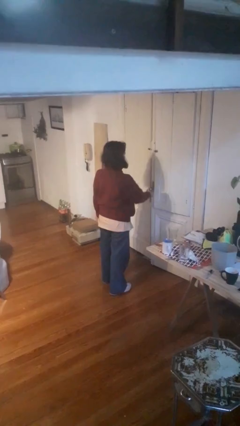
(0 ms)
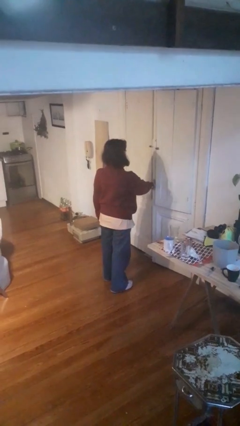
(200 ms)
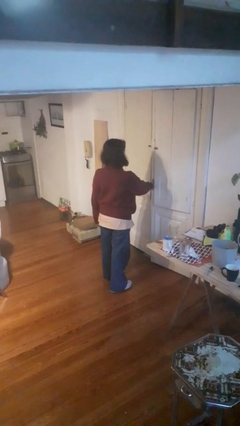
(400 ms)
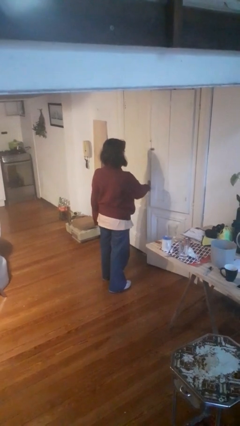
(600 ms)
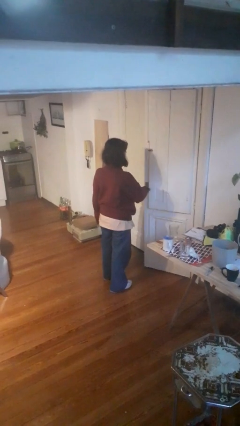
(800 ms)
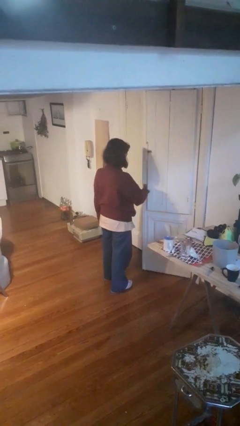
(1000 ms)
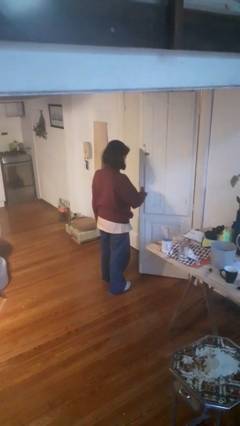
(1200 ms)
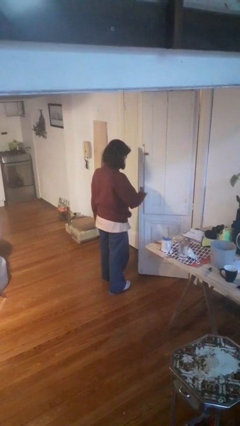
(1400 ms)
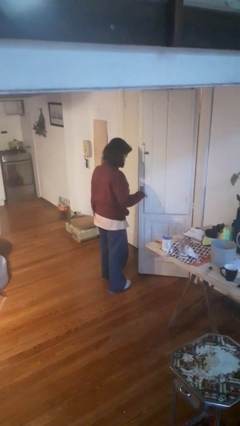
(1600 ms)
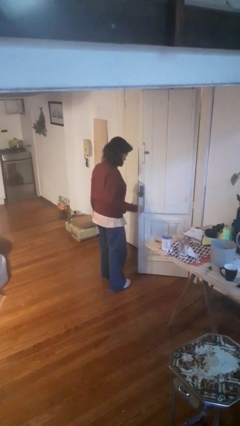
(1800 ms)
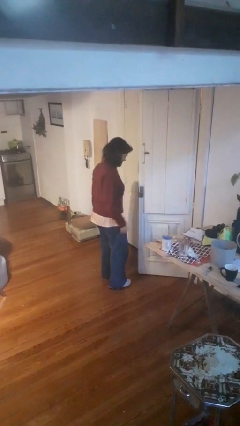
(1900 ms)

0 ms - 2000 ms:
person opens facility door

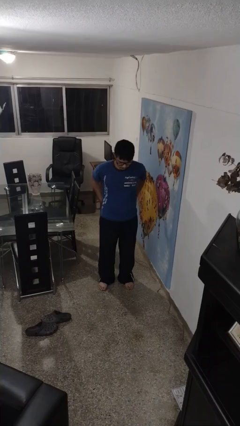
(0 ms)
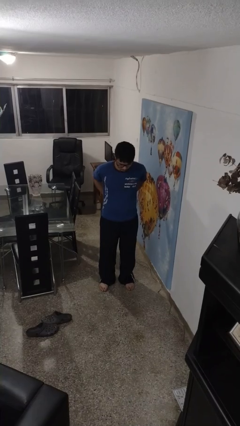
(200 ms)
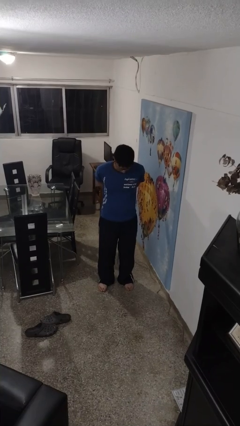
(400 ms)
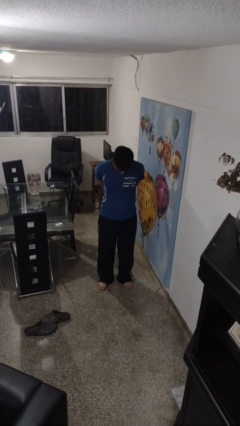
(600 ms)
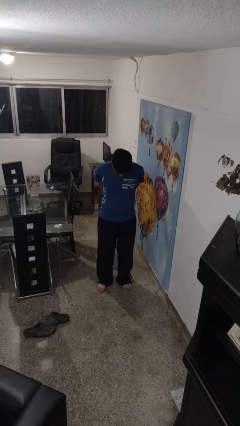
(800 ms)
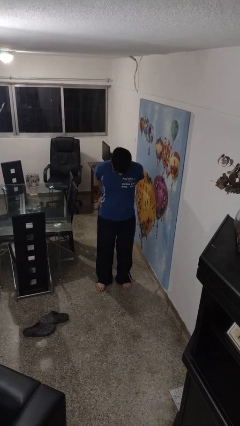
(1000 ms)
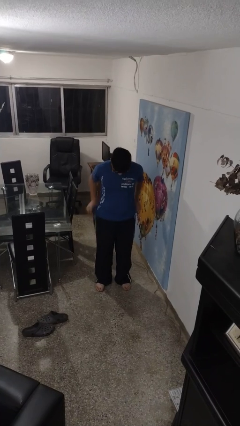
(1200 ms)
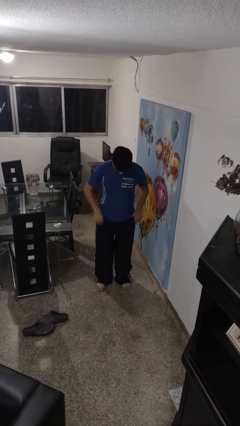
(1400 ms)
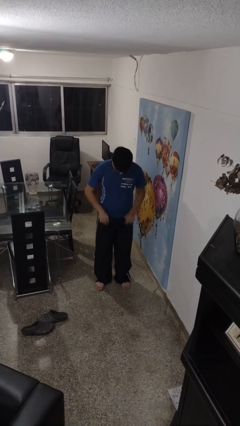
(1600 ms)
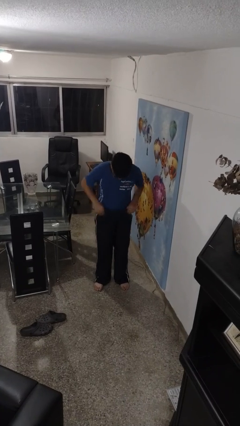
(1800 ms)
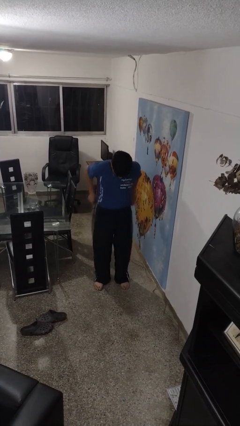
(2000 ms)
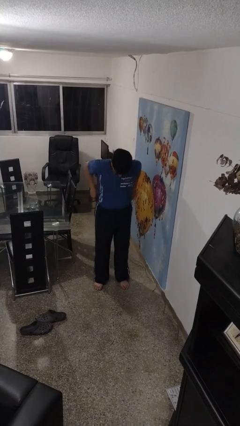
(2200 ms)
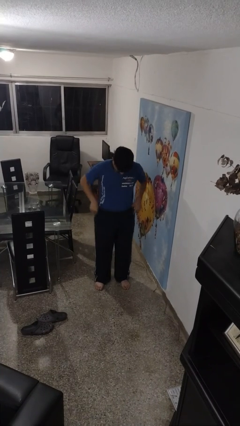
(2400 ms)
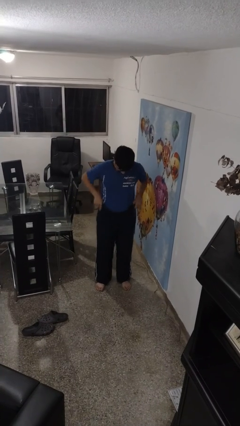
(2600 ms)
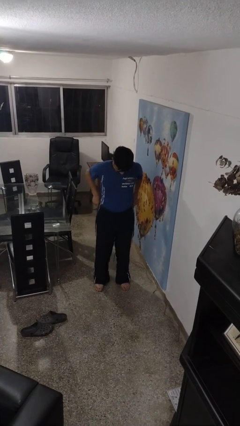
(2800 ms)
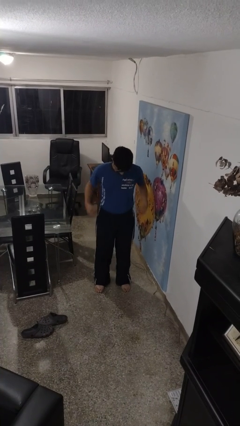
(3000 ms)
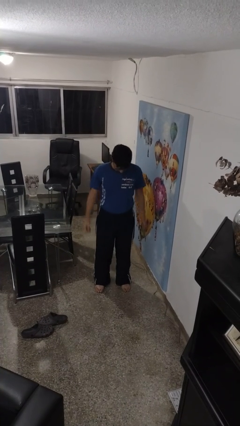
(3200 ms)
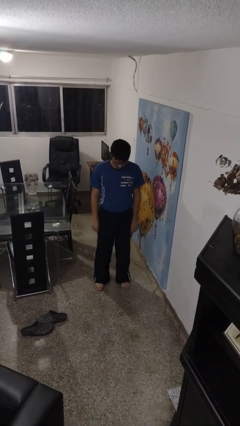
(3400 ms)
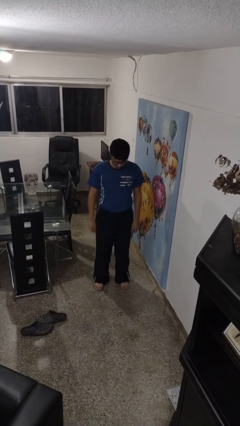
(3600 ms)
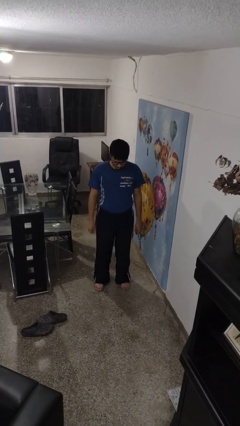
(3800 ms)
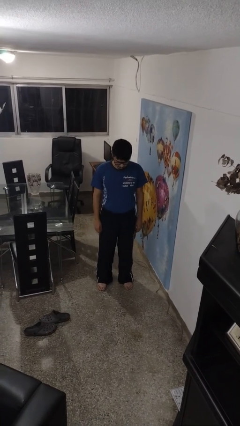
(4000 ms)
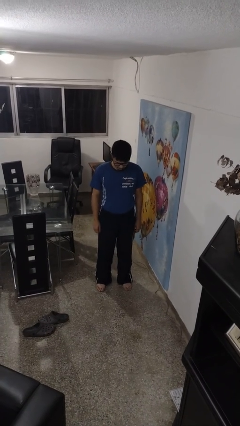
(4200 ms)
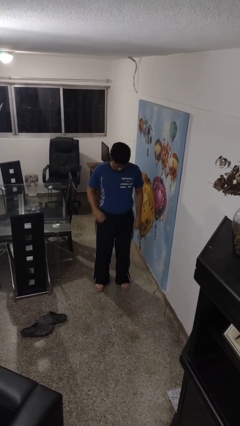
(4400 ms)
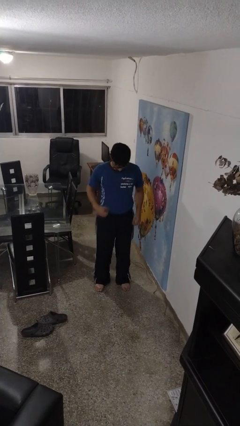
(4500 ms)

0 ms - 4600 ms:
person tucks in shirt

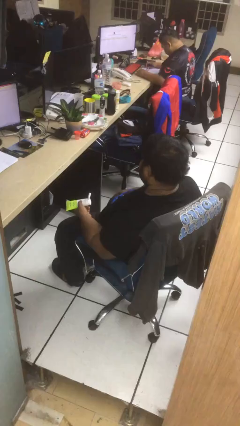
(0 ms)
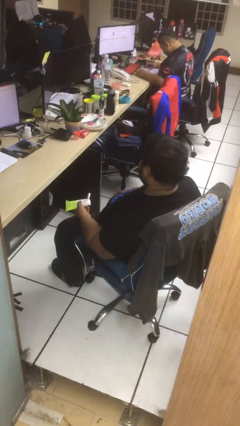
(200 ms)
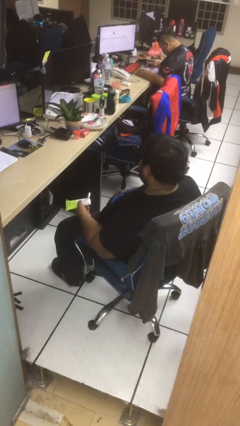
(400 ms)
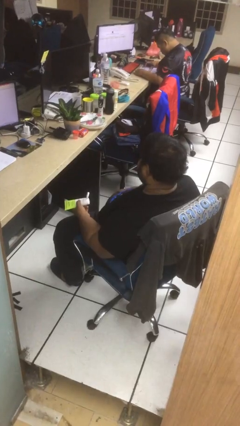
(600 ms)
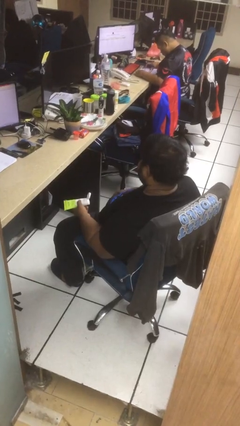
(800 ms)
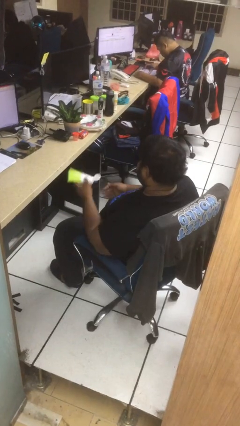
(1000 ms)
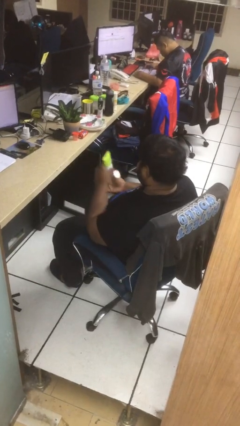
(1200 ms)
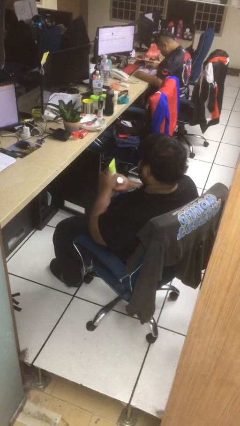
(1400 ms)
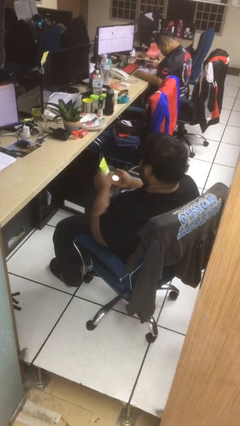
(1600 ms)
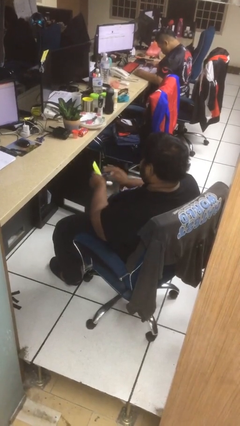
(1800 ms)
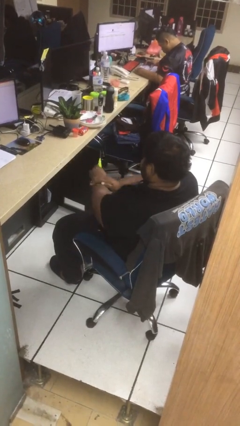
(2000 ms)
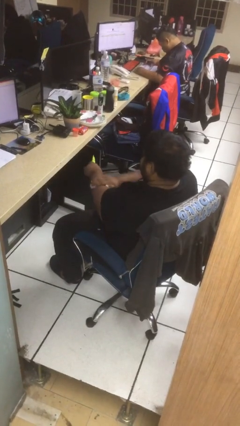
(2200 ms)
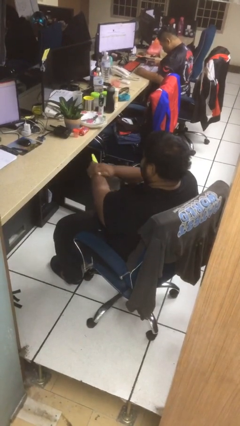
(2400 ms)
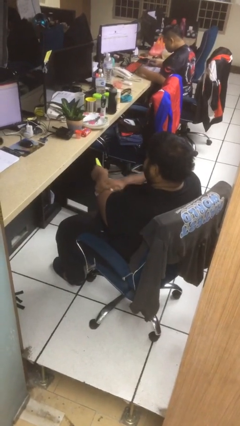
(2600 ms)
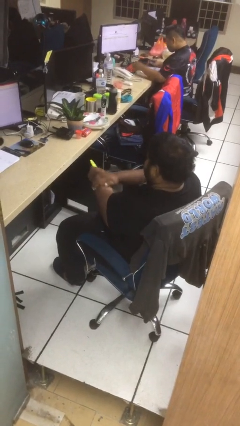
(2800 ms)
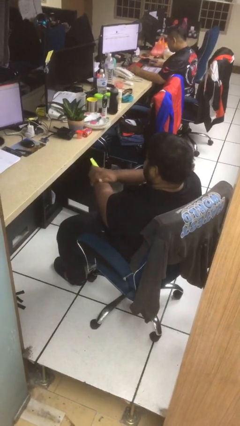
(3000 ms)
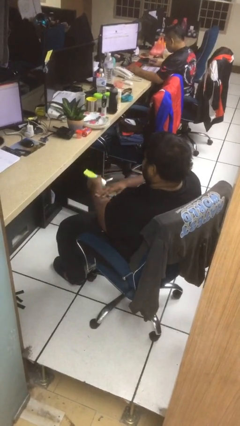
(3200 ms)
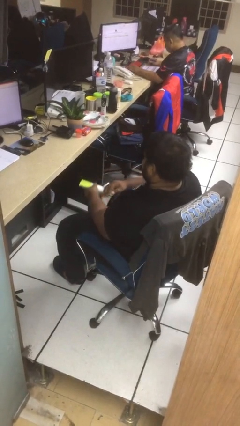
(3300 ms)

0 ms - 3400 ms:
person applies sunscreen

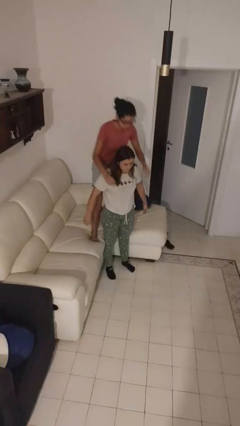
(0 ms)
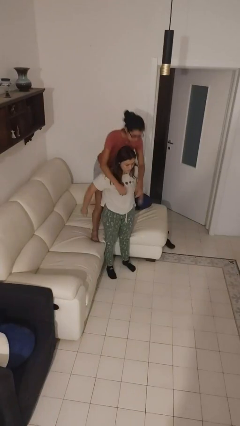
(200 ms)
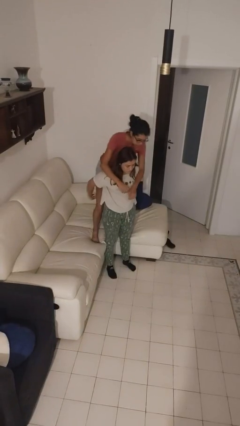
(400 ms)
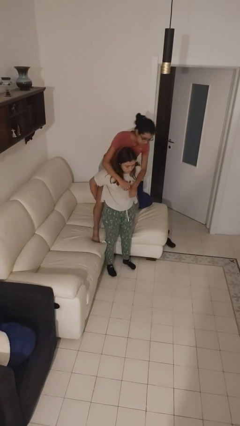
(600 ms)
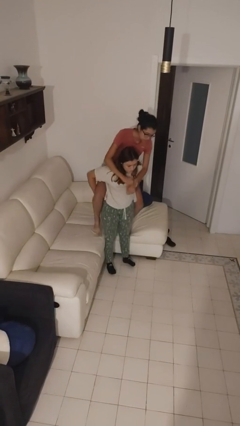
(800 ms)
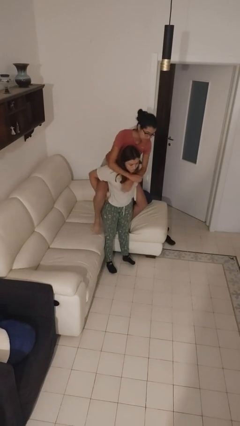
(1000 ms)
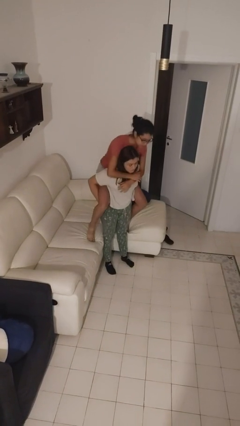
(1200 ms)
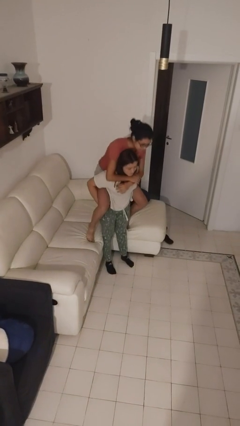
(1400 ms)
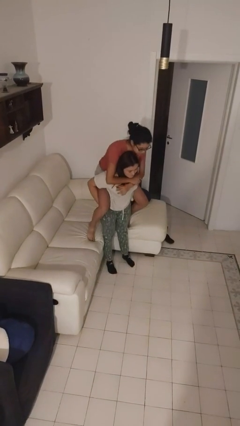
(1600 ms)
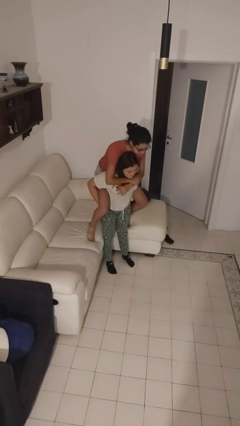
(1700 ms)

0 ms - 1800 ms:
person carries person over shoulder

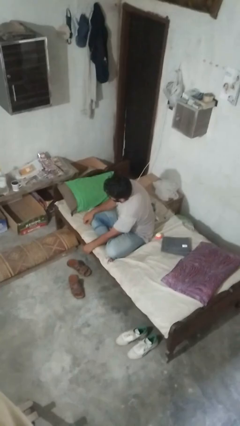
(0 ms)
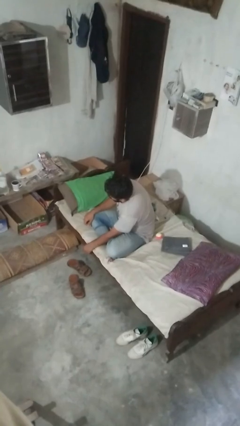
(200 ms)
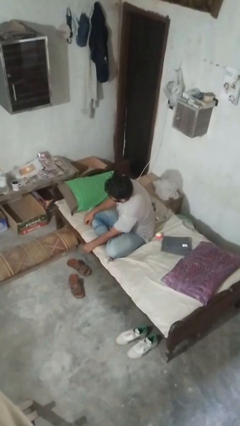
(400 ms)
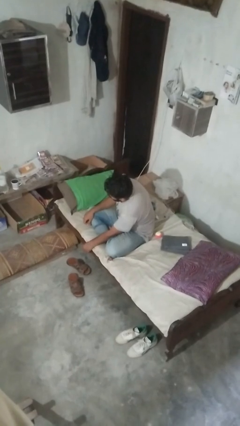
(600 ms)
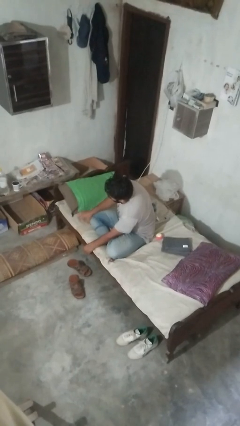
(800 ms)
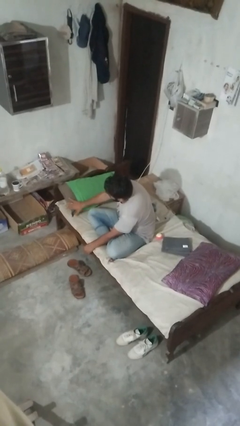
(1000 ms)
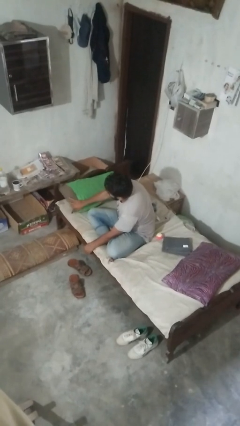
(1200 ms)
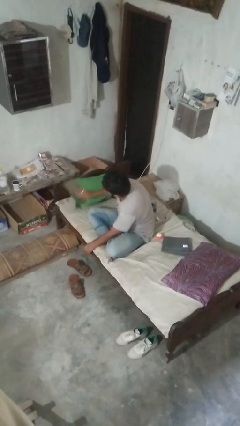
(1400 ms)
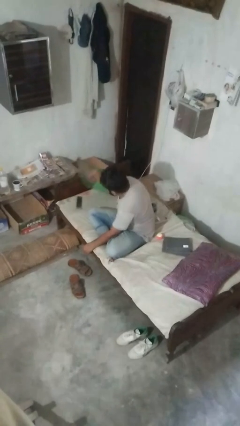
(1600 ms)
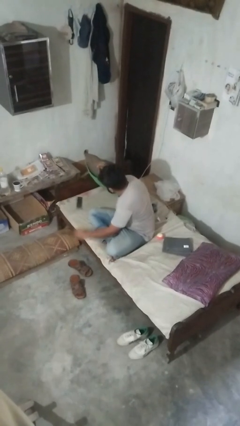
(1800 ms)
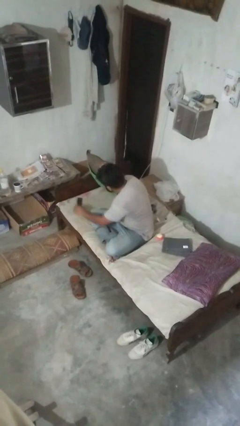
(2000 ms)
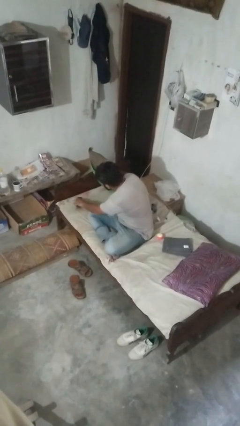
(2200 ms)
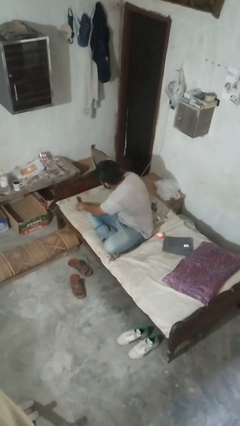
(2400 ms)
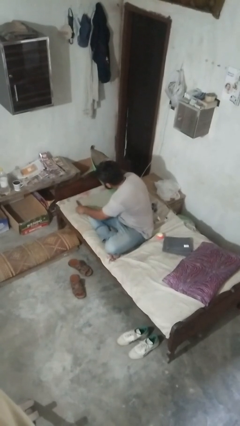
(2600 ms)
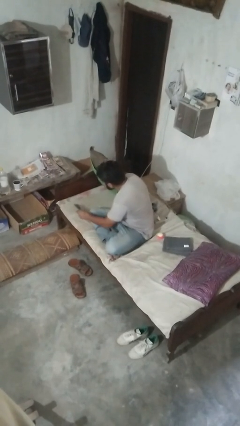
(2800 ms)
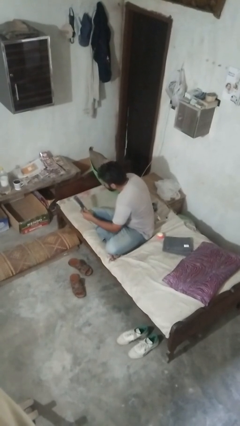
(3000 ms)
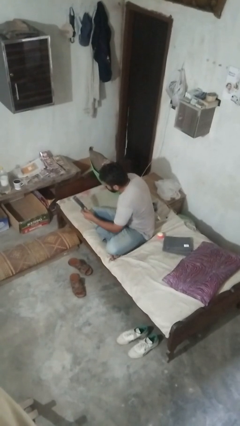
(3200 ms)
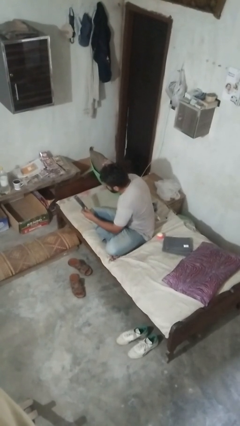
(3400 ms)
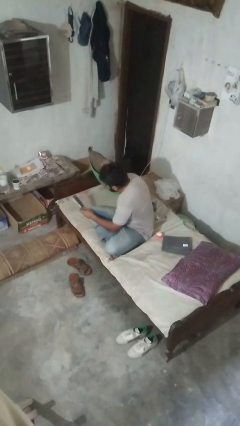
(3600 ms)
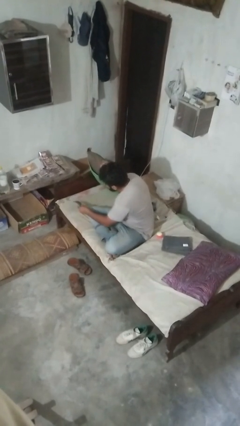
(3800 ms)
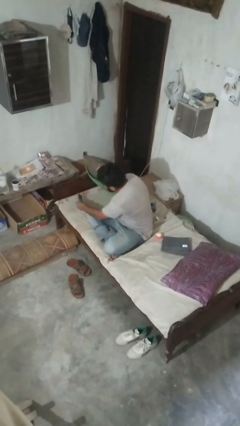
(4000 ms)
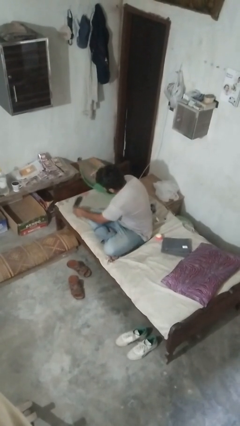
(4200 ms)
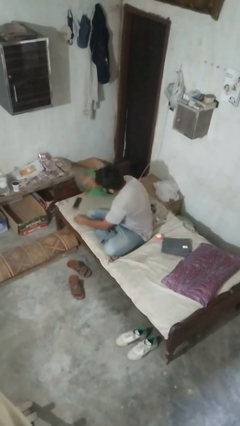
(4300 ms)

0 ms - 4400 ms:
person searches in couch

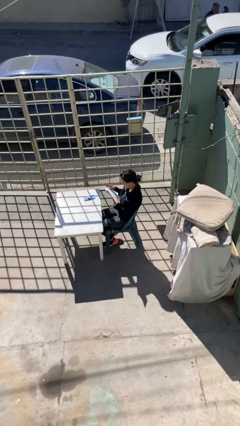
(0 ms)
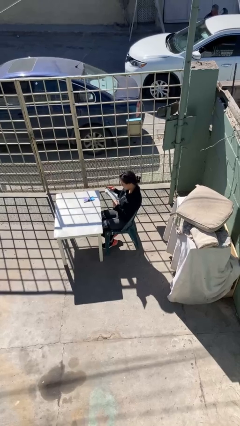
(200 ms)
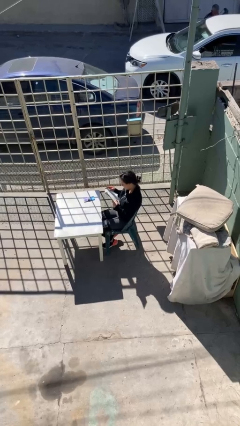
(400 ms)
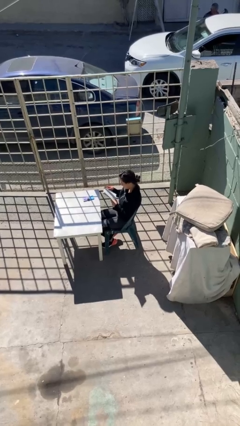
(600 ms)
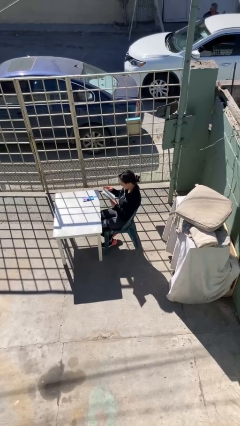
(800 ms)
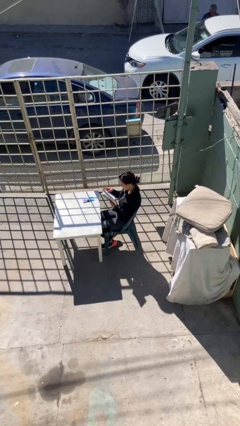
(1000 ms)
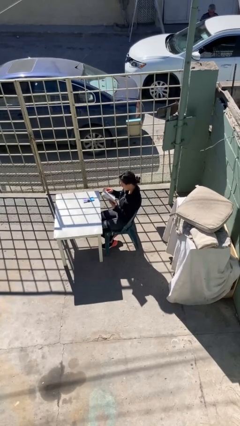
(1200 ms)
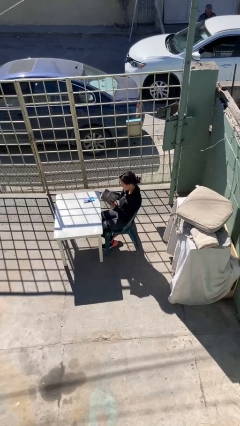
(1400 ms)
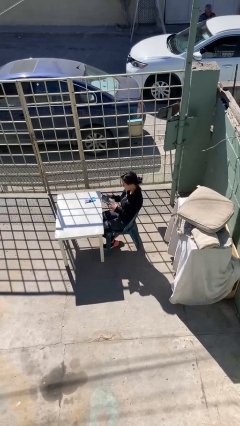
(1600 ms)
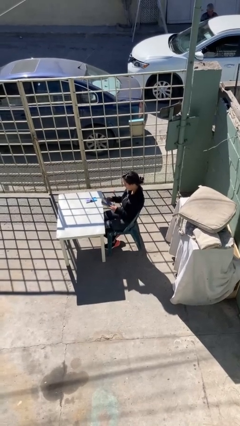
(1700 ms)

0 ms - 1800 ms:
person reads document
